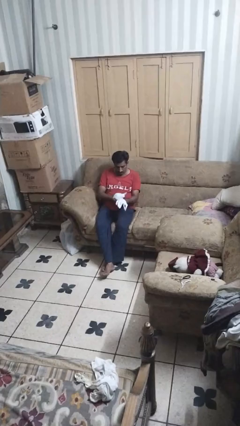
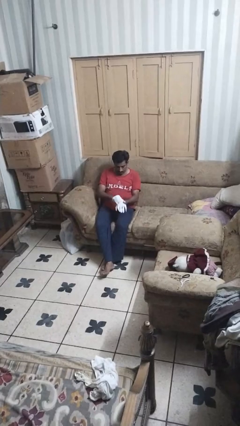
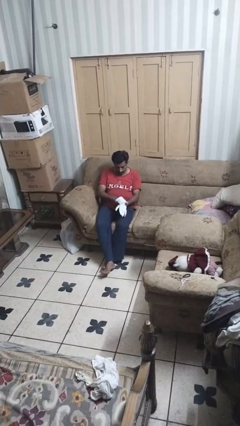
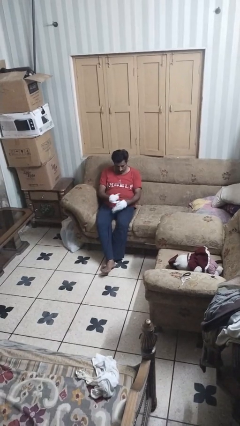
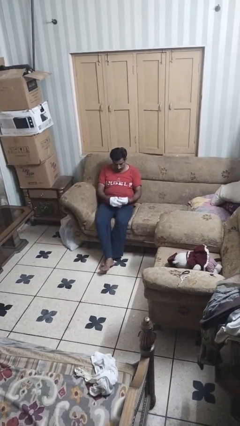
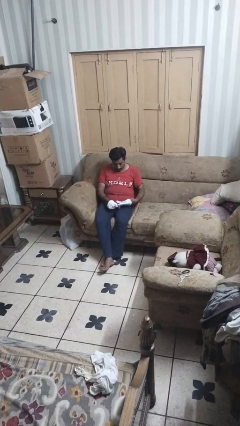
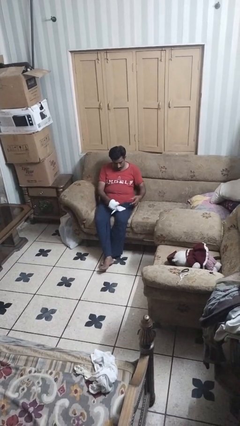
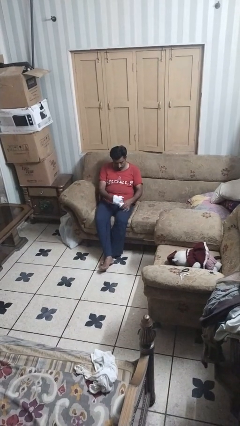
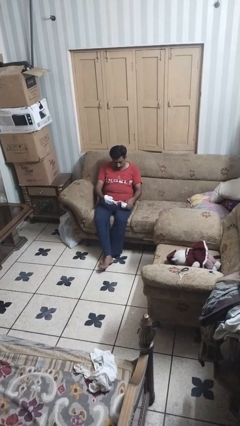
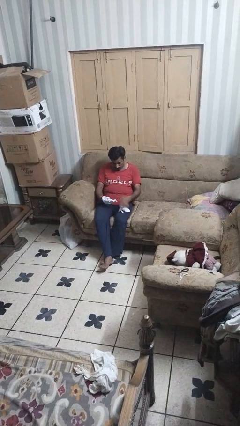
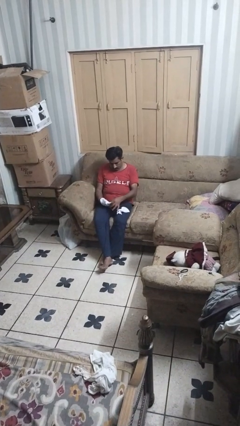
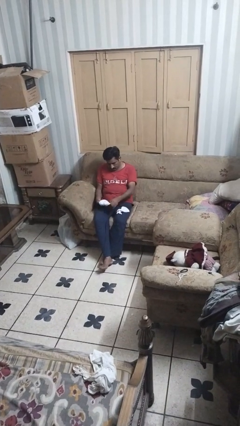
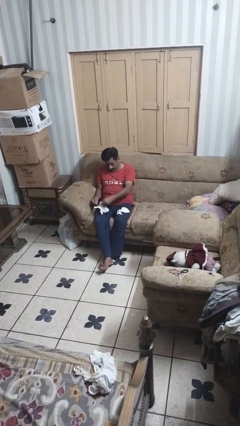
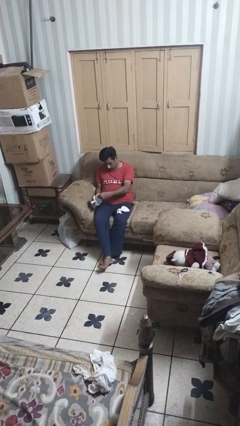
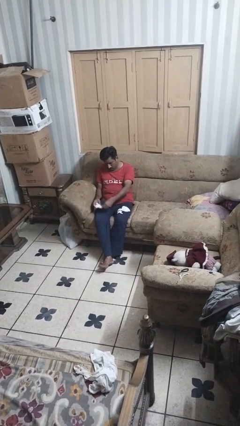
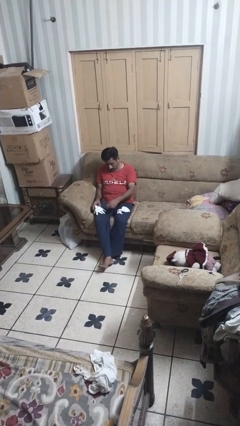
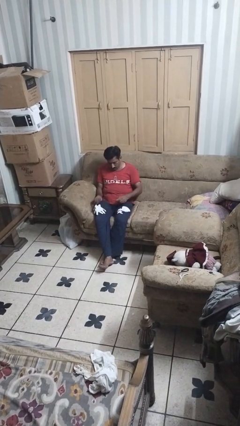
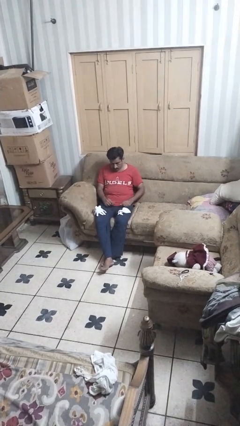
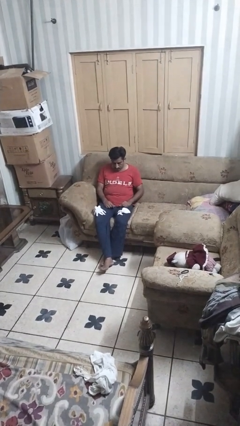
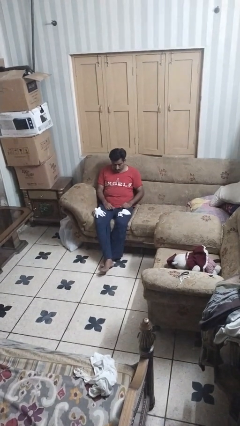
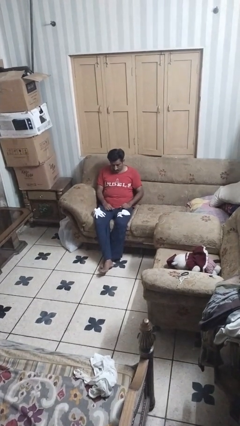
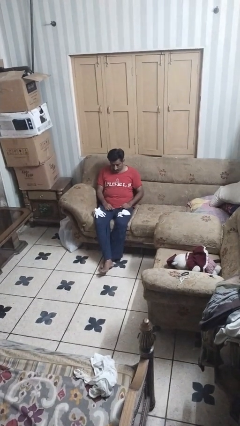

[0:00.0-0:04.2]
person takes off gloves

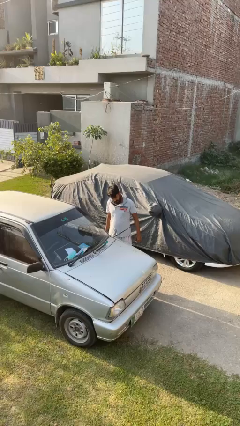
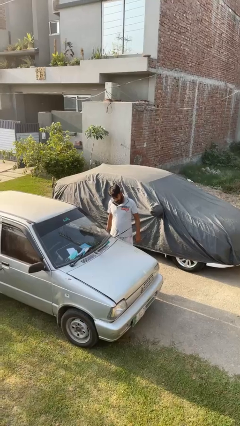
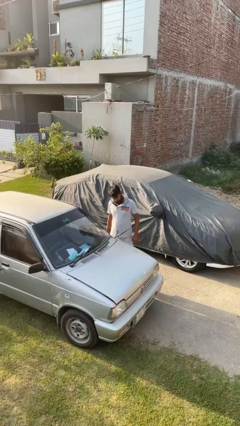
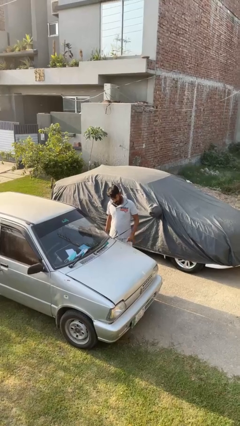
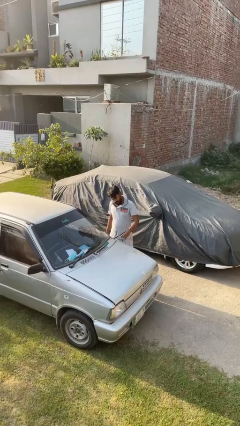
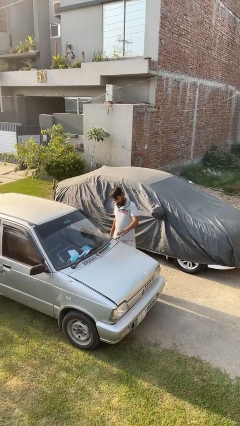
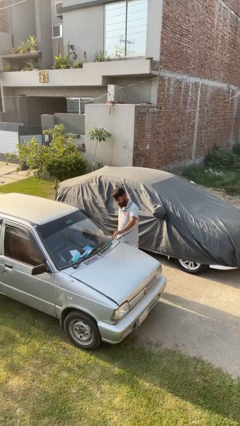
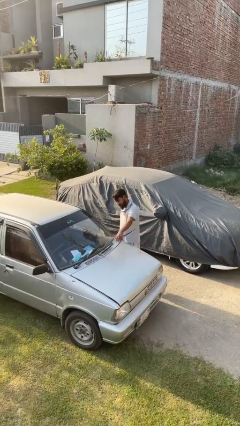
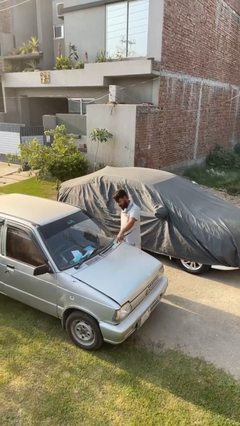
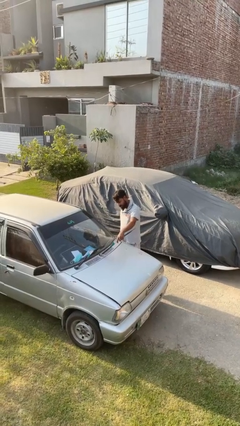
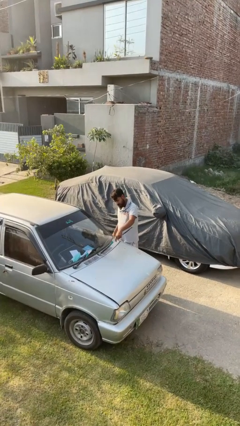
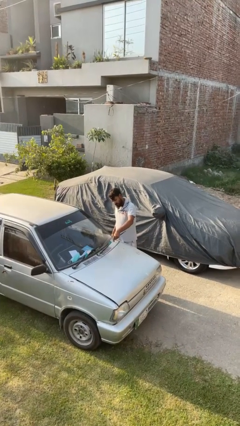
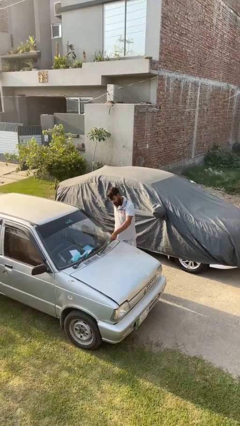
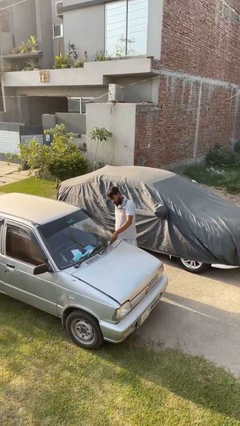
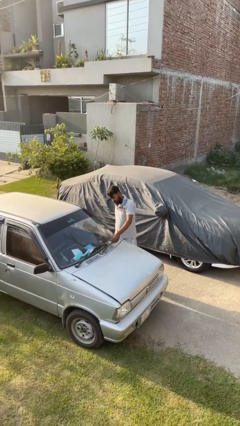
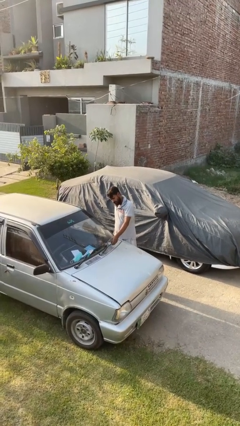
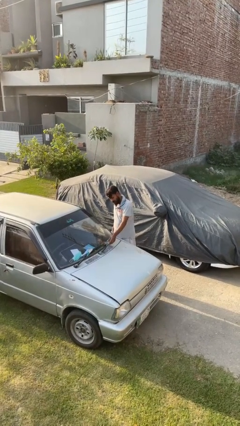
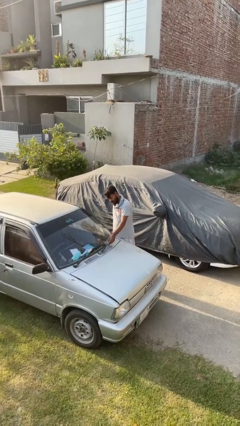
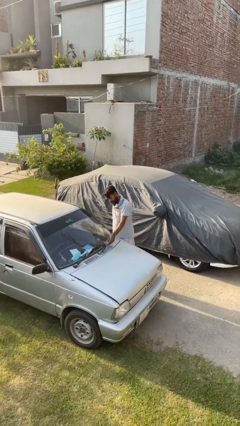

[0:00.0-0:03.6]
person flips down car wipers

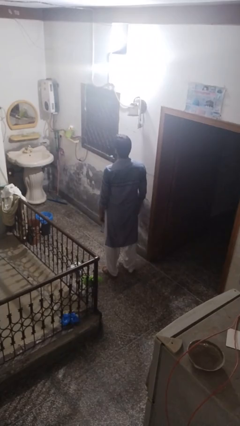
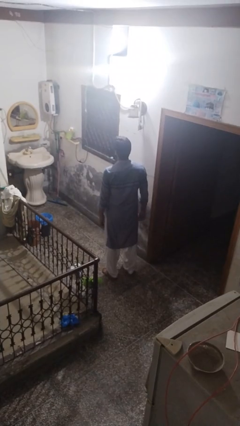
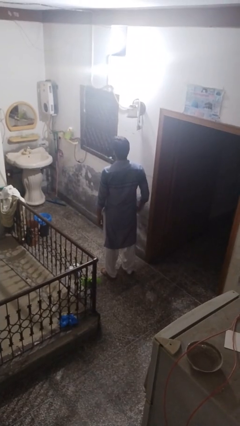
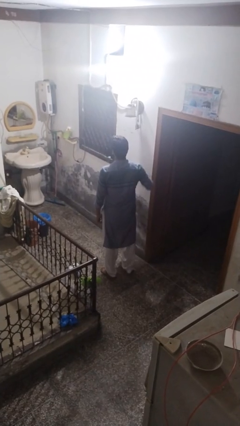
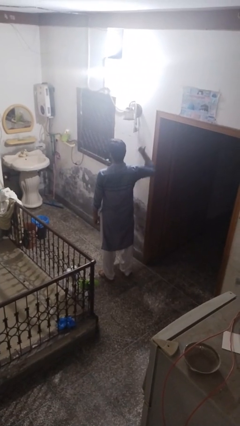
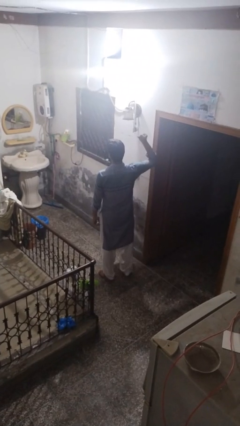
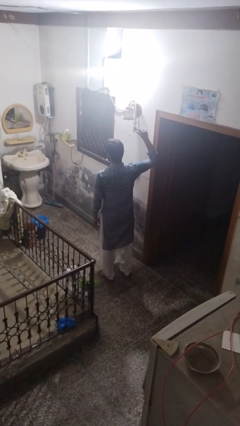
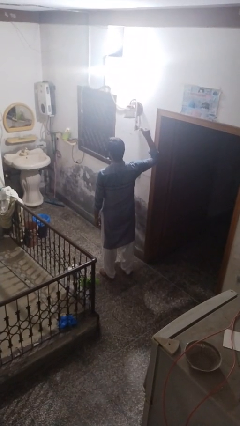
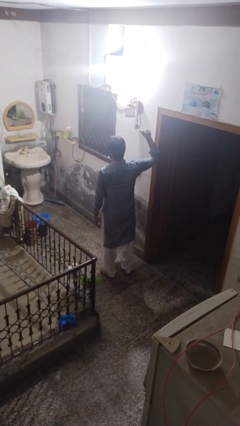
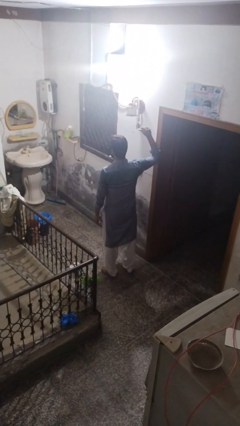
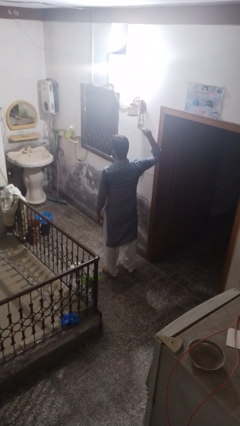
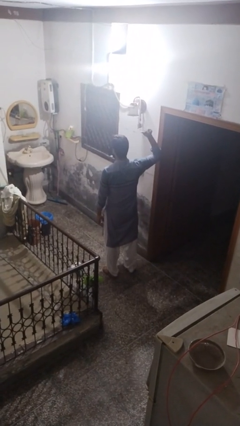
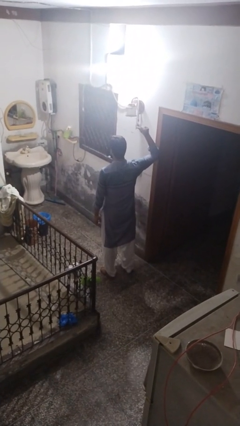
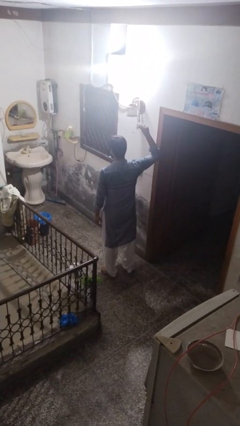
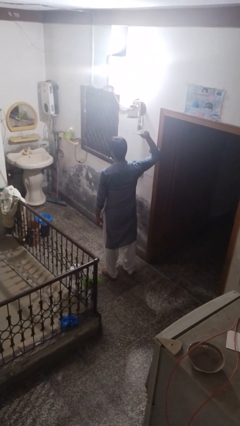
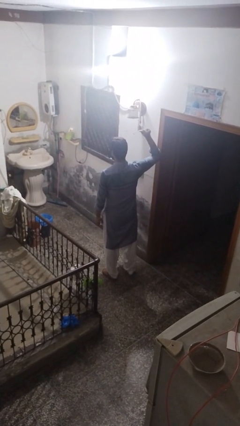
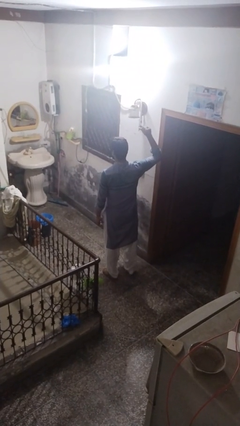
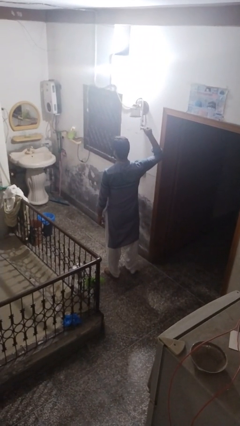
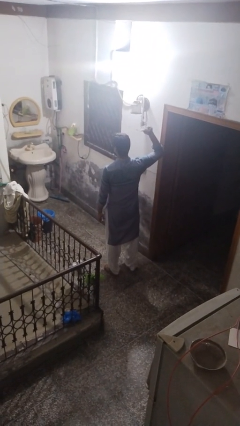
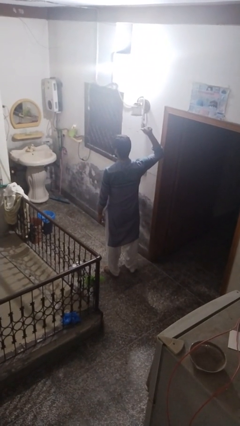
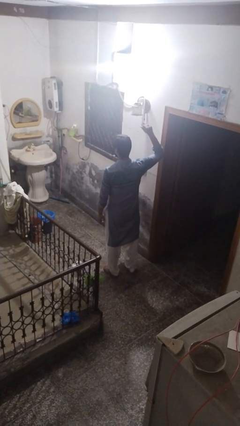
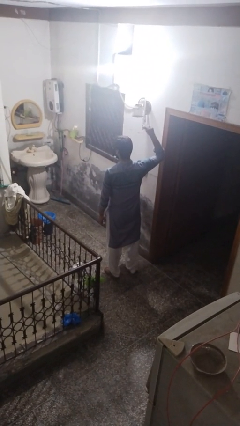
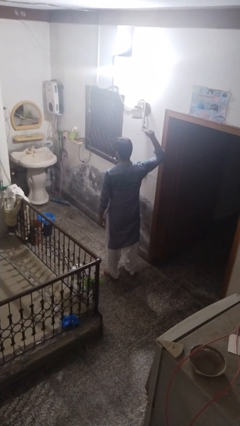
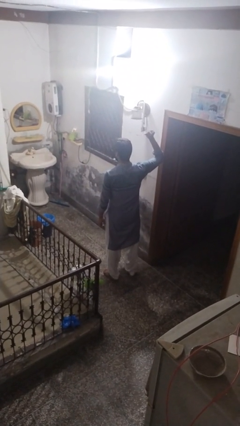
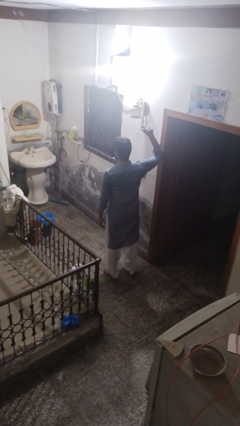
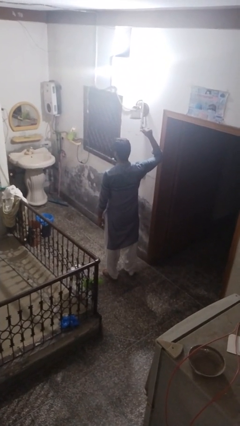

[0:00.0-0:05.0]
person snaps fingers

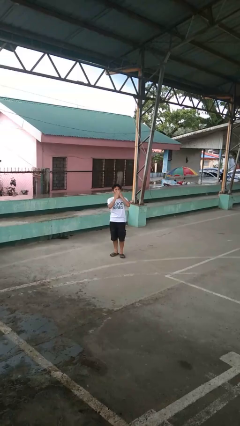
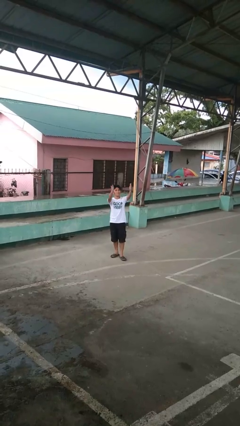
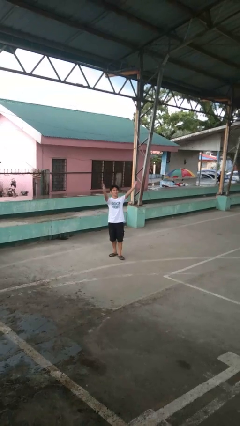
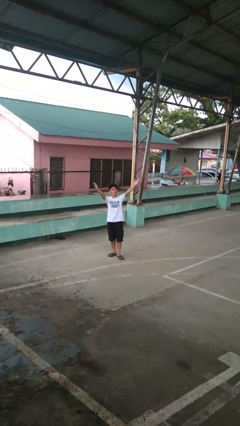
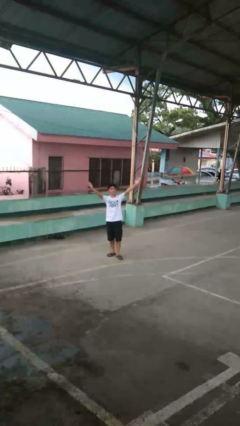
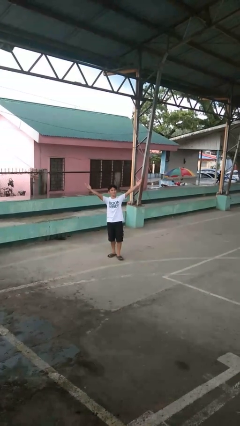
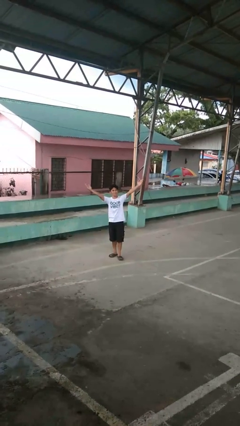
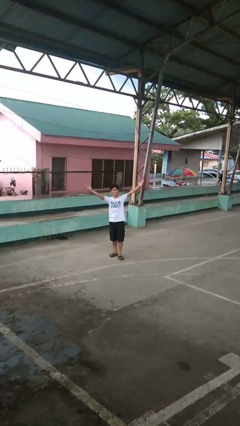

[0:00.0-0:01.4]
person gestures blow kiss

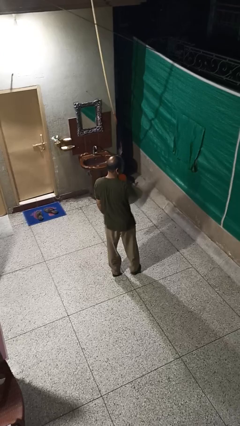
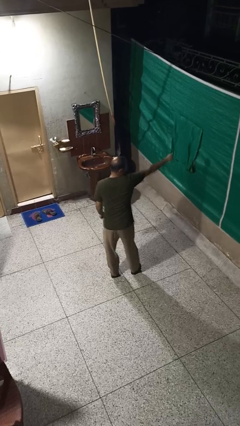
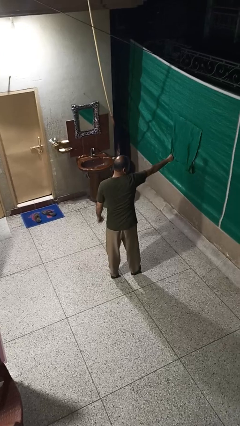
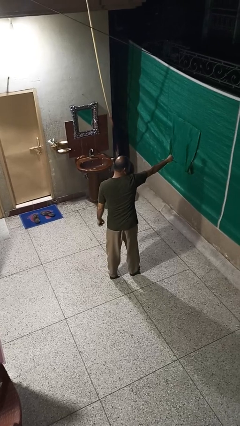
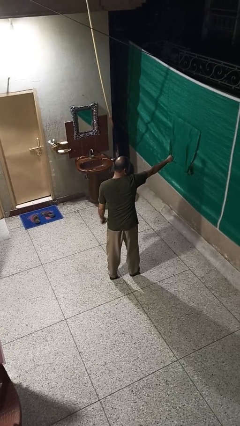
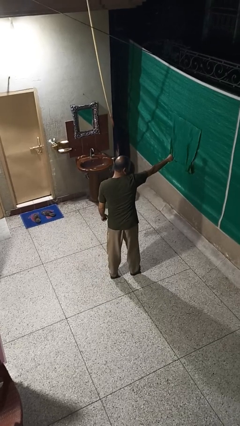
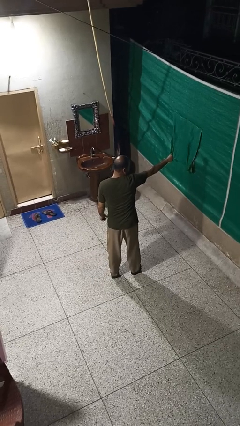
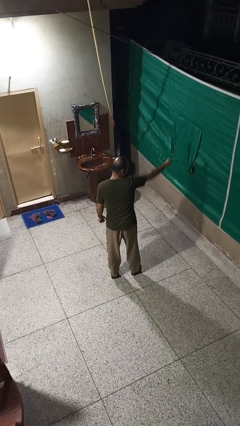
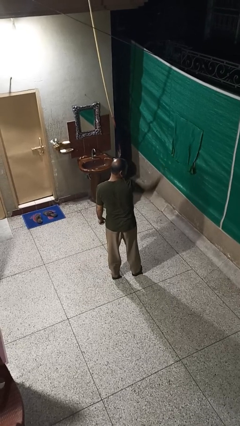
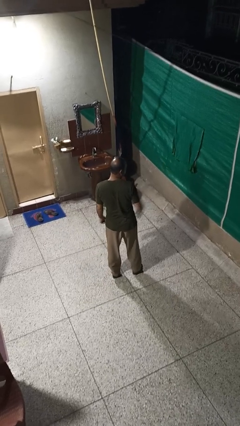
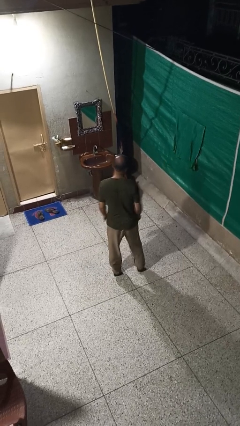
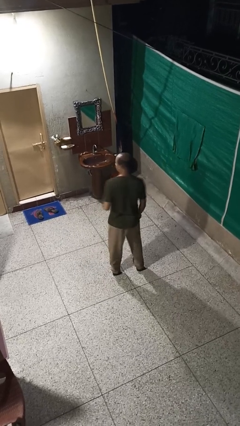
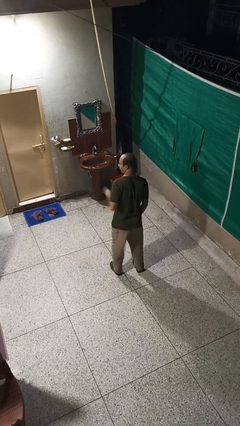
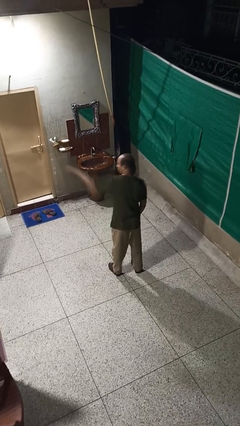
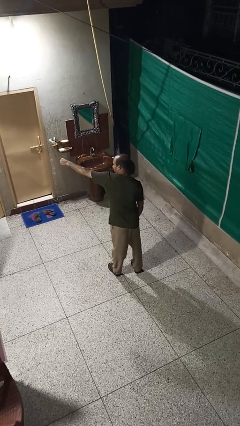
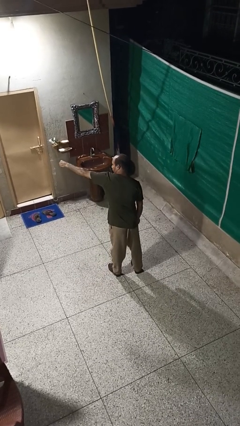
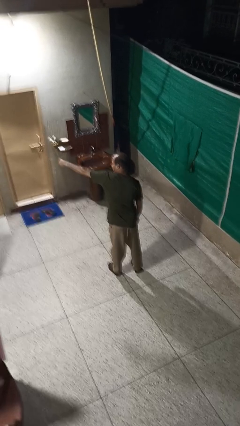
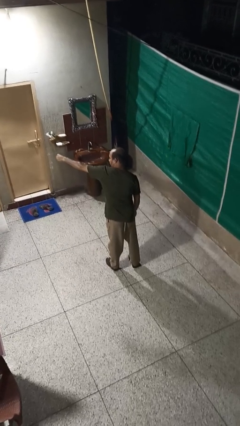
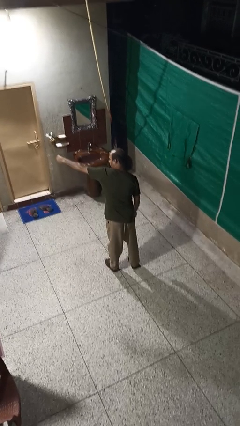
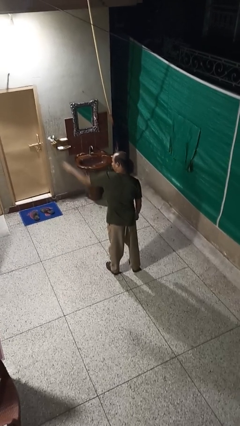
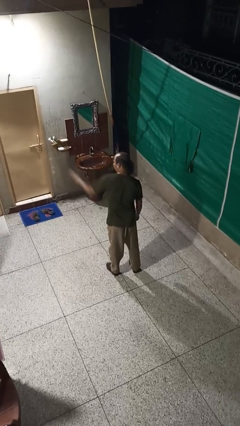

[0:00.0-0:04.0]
person punches
